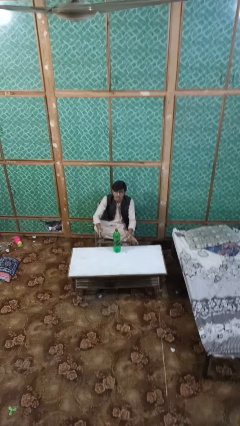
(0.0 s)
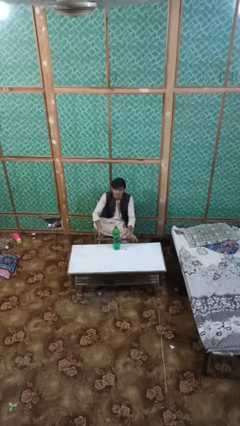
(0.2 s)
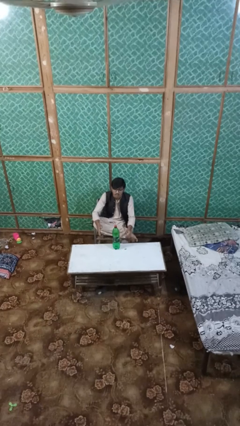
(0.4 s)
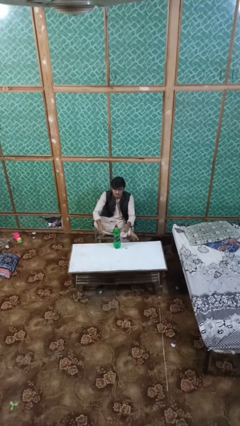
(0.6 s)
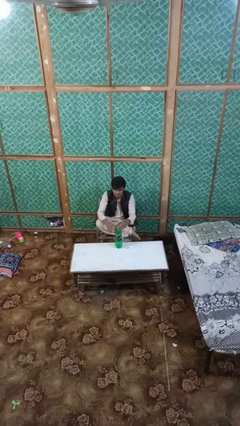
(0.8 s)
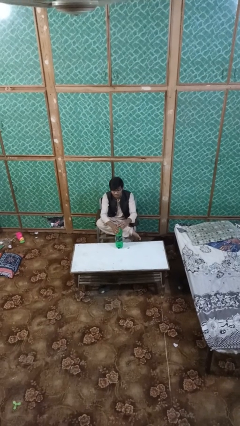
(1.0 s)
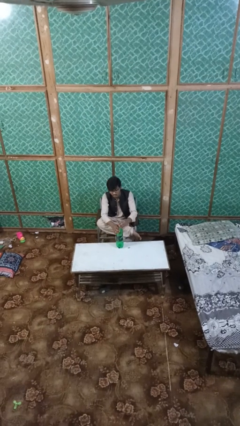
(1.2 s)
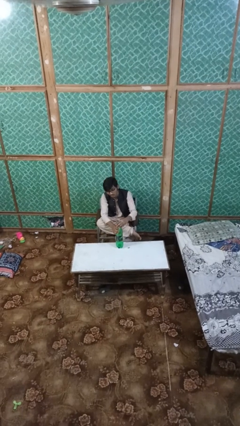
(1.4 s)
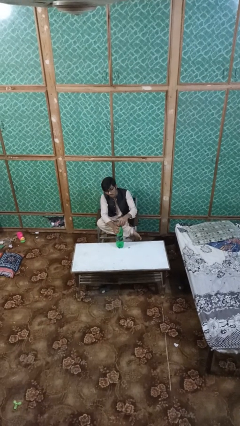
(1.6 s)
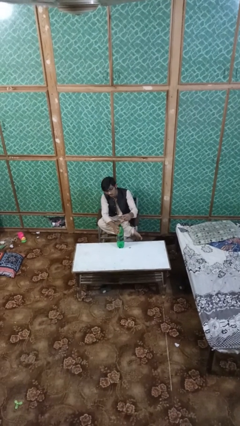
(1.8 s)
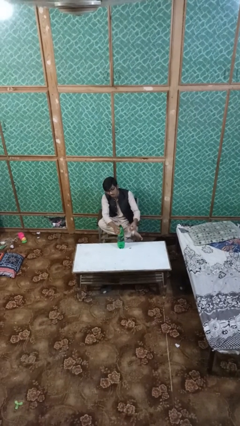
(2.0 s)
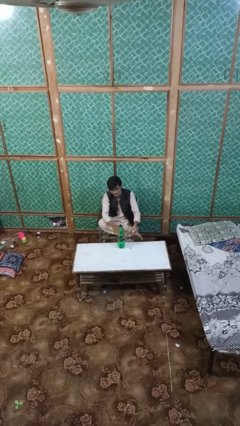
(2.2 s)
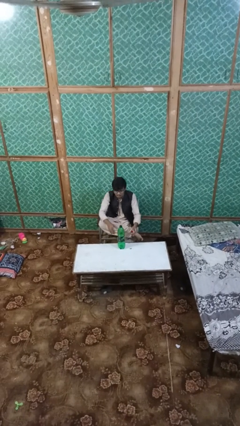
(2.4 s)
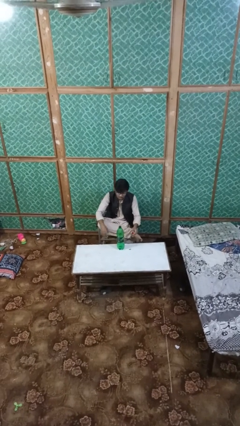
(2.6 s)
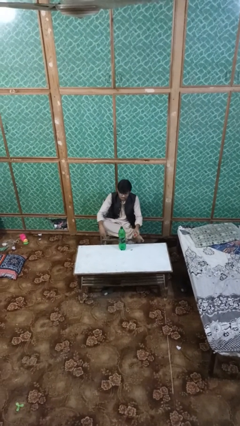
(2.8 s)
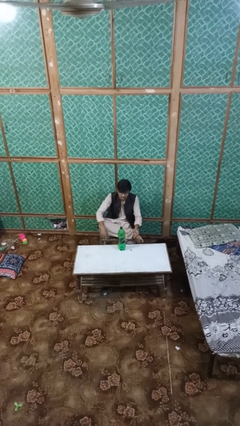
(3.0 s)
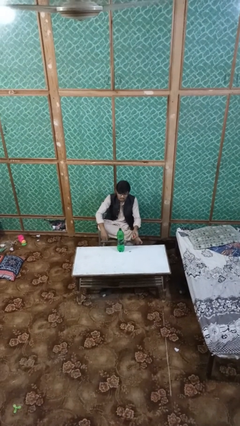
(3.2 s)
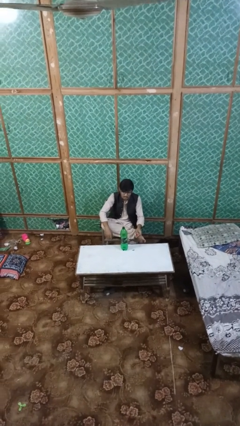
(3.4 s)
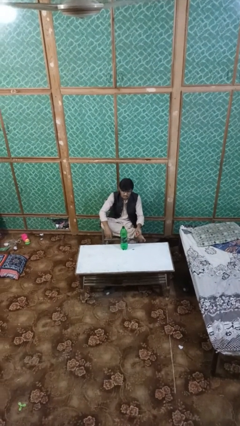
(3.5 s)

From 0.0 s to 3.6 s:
person unscrews lid from bottle

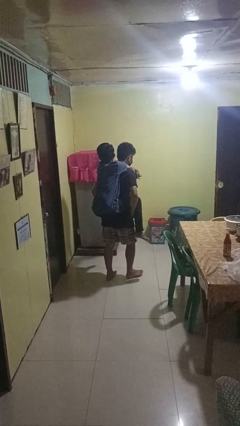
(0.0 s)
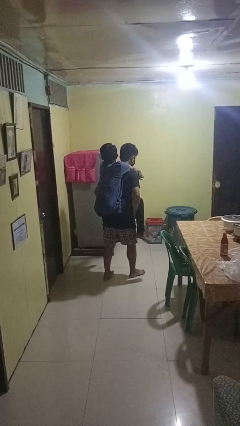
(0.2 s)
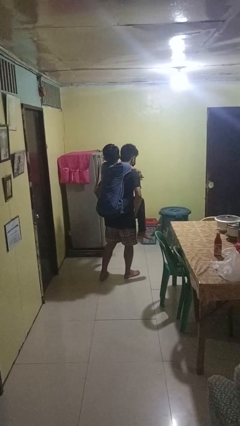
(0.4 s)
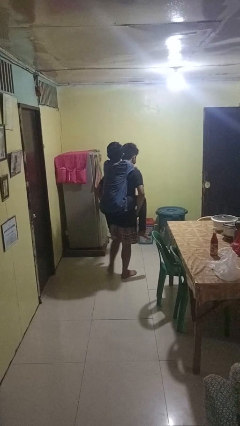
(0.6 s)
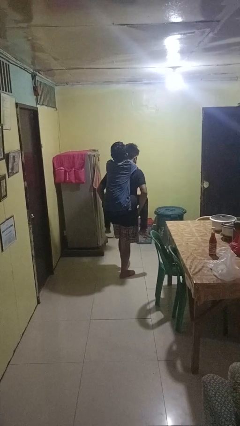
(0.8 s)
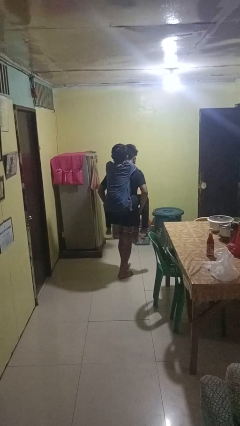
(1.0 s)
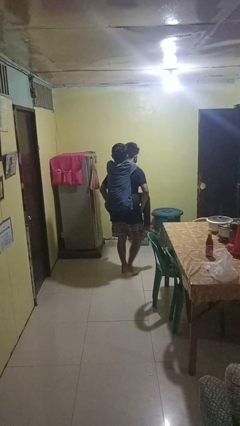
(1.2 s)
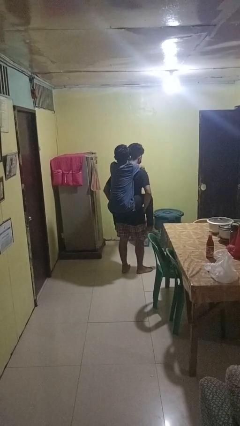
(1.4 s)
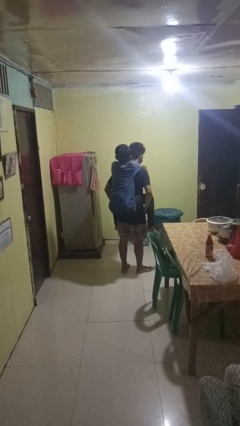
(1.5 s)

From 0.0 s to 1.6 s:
person carries person on back

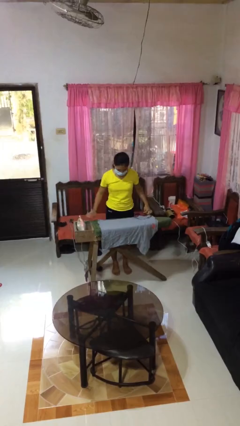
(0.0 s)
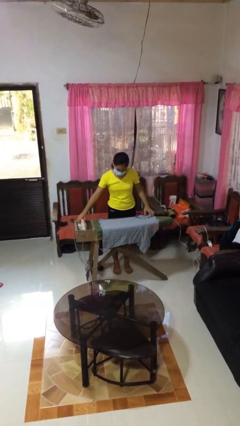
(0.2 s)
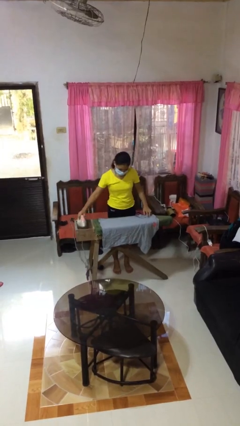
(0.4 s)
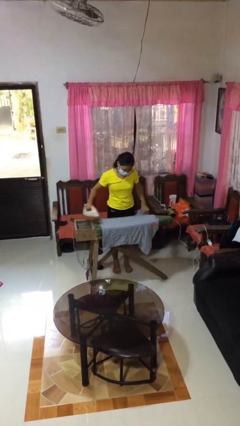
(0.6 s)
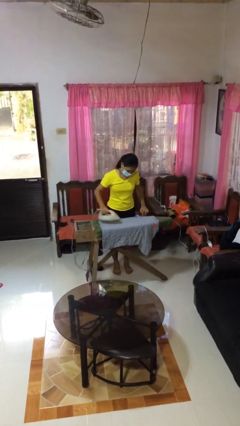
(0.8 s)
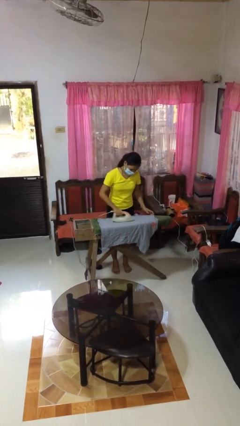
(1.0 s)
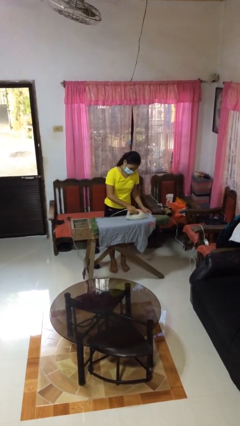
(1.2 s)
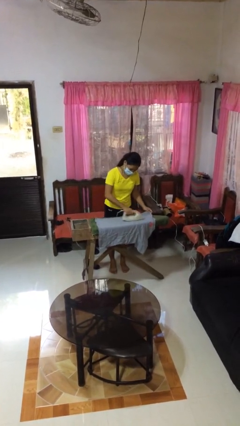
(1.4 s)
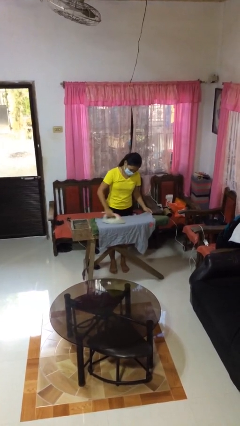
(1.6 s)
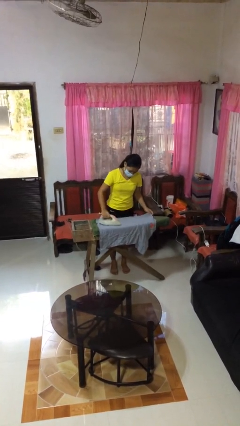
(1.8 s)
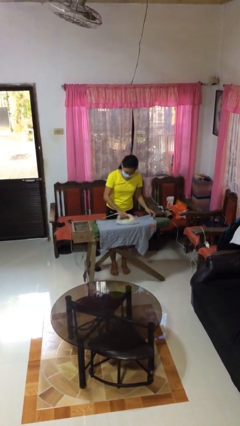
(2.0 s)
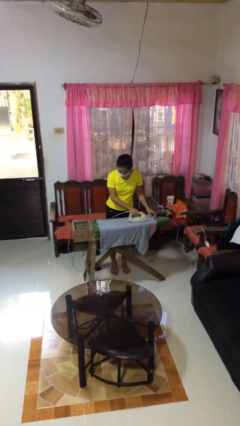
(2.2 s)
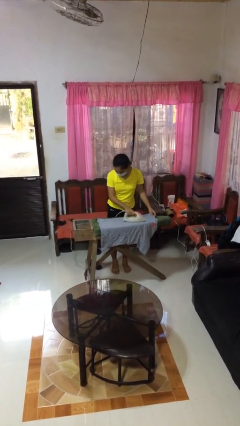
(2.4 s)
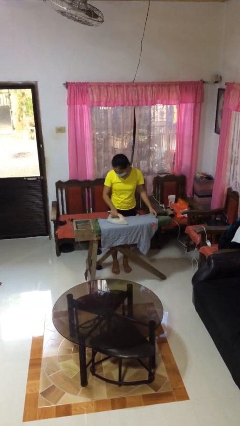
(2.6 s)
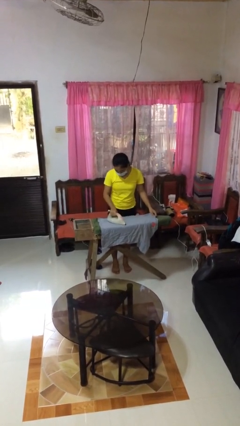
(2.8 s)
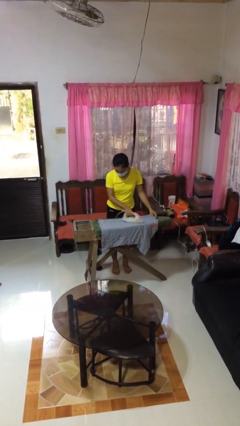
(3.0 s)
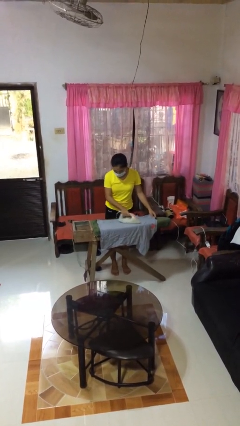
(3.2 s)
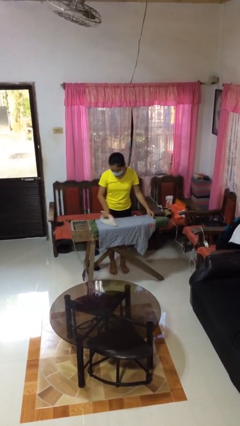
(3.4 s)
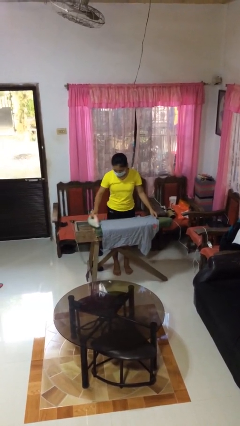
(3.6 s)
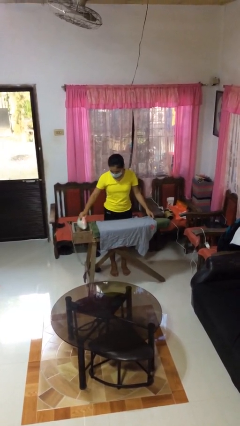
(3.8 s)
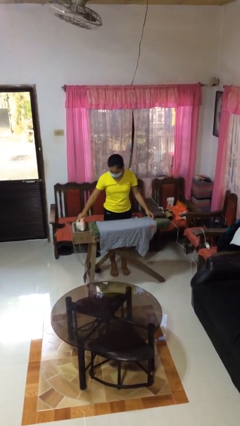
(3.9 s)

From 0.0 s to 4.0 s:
person irons clothes

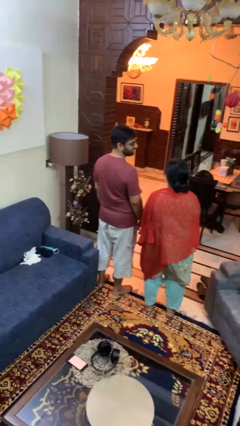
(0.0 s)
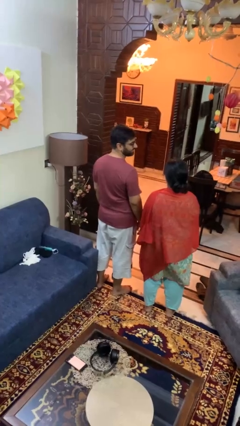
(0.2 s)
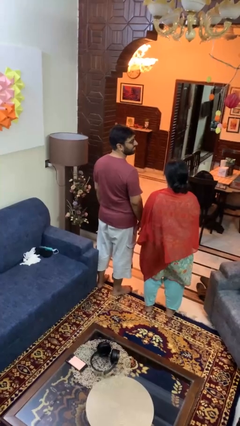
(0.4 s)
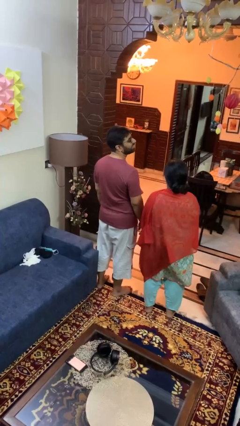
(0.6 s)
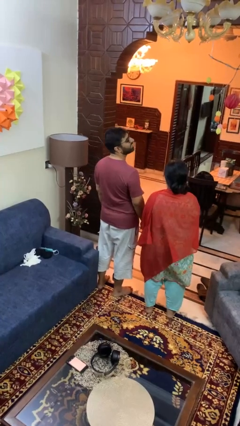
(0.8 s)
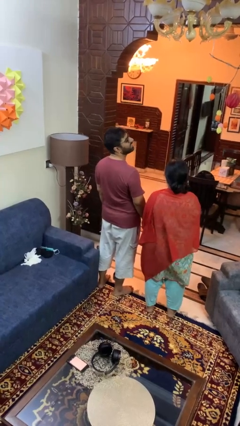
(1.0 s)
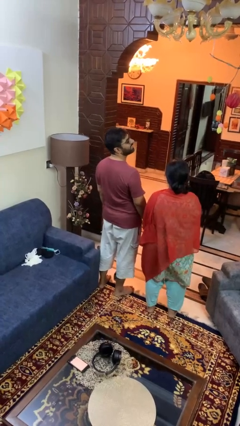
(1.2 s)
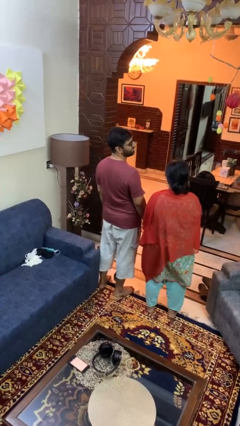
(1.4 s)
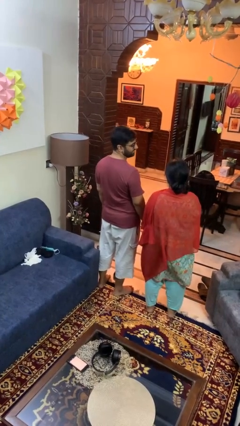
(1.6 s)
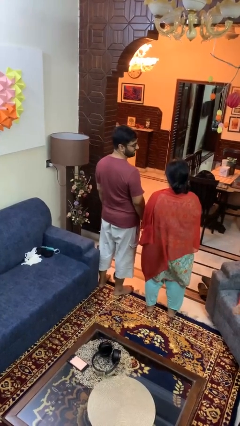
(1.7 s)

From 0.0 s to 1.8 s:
person laughs with person

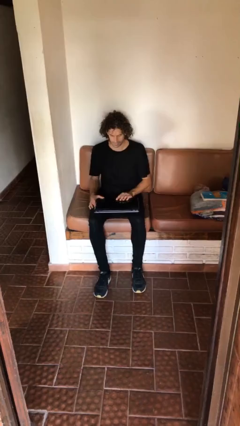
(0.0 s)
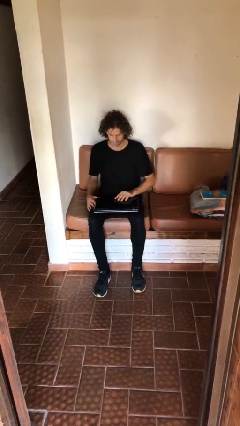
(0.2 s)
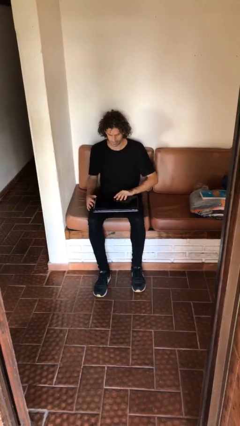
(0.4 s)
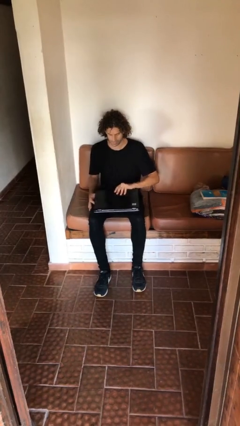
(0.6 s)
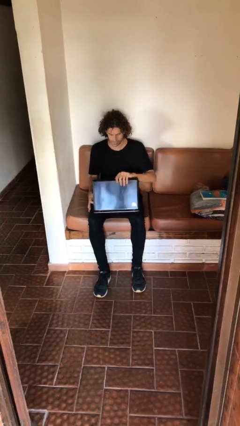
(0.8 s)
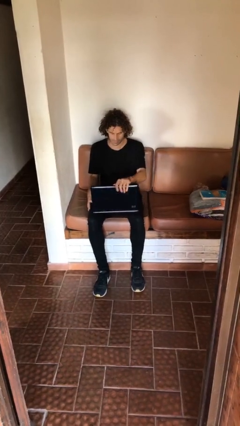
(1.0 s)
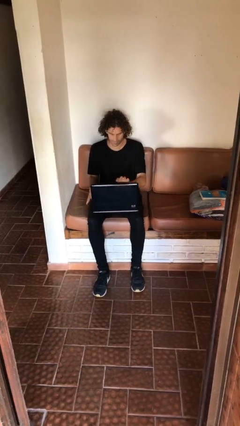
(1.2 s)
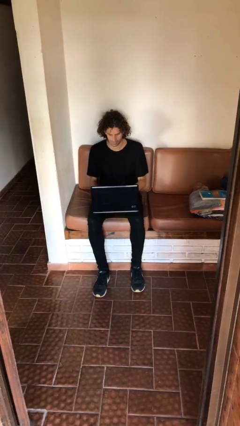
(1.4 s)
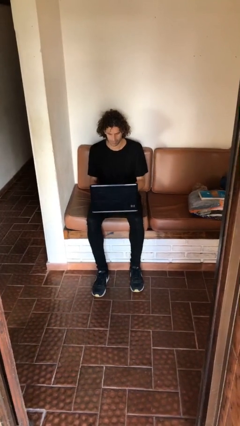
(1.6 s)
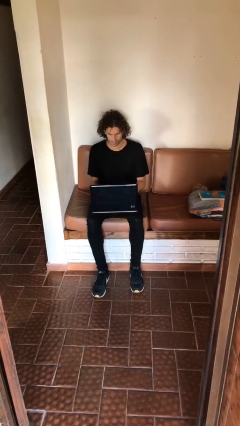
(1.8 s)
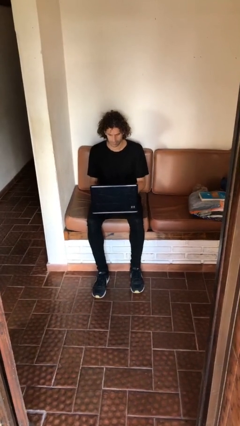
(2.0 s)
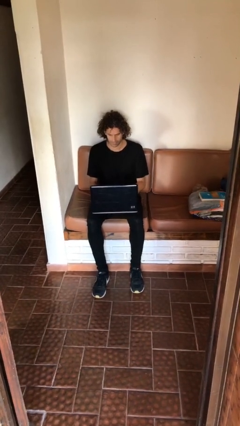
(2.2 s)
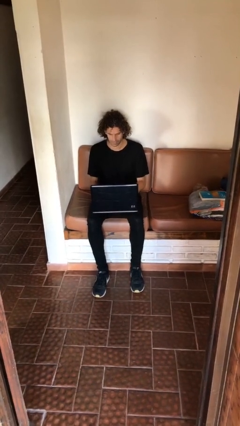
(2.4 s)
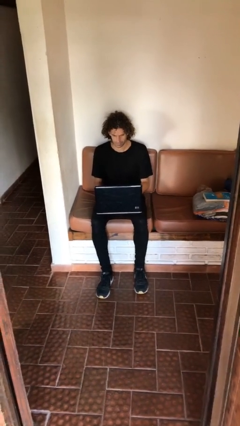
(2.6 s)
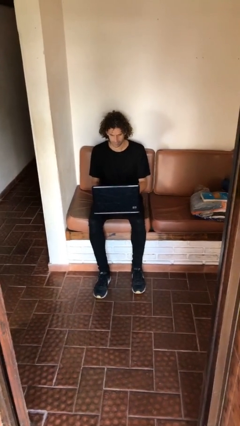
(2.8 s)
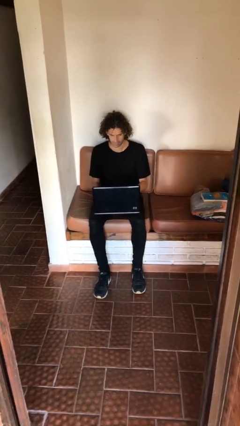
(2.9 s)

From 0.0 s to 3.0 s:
person interacts with laptop

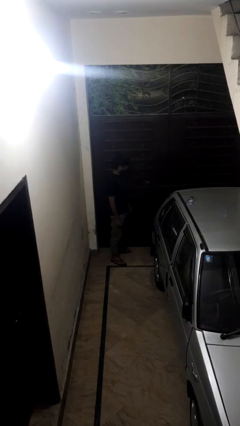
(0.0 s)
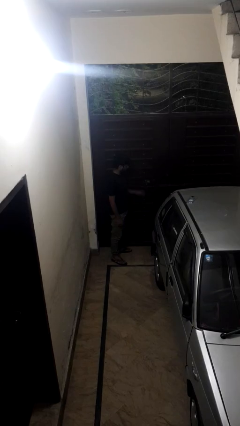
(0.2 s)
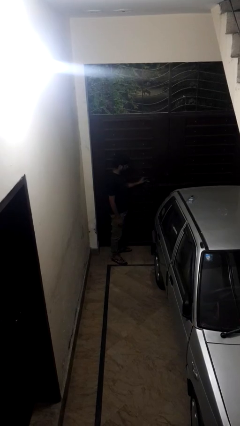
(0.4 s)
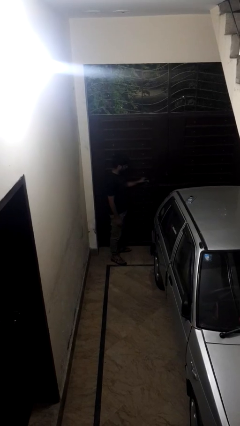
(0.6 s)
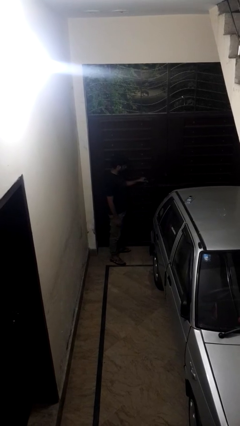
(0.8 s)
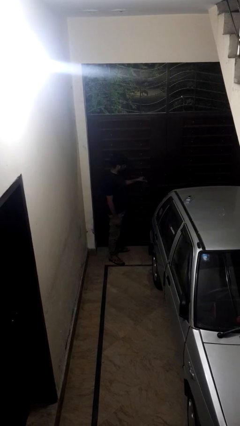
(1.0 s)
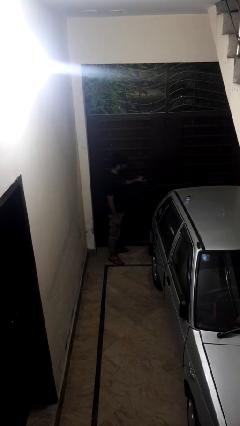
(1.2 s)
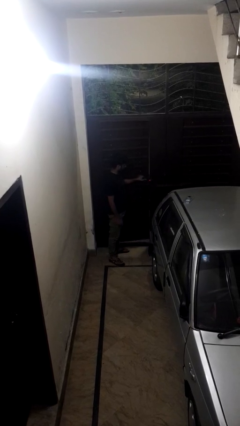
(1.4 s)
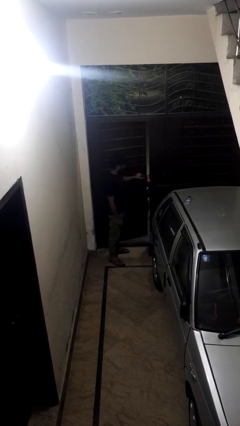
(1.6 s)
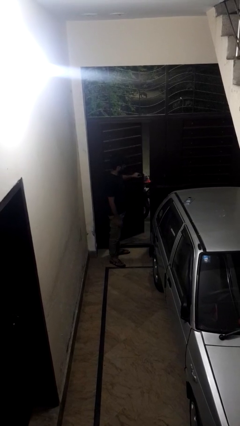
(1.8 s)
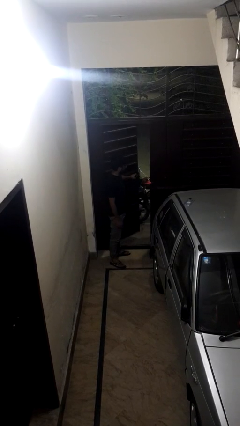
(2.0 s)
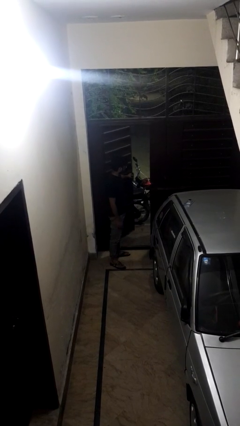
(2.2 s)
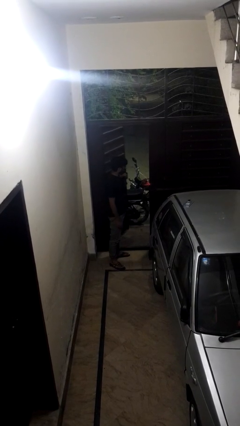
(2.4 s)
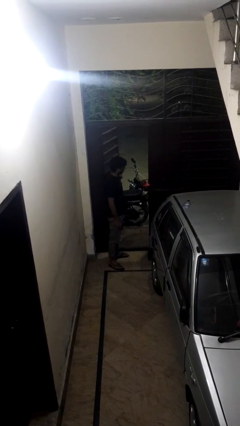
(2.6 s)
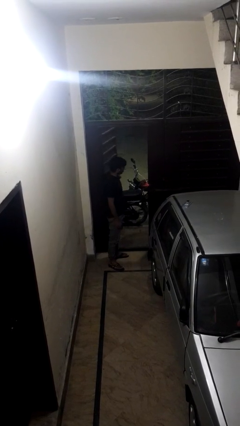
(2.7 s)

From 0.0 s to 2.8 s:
person opens gate

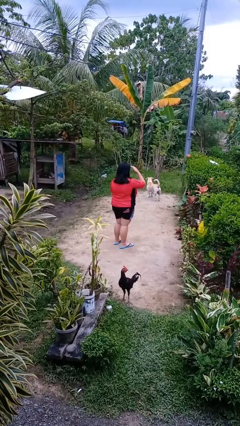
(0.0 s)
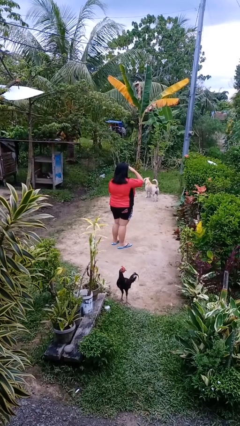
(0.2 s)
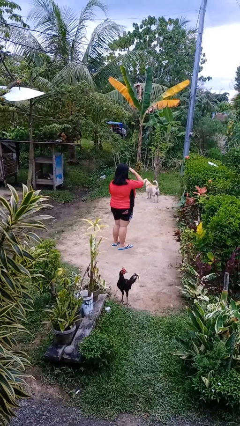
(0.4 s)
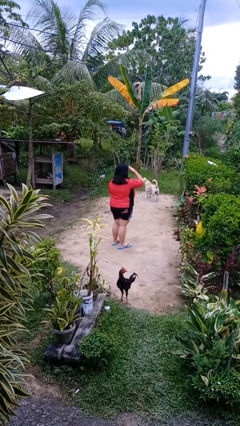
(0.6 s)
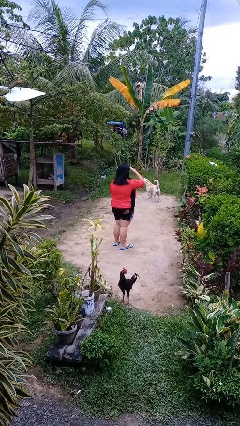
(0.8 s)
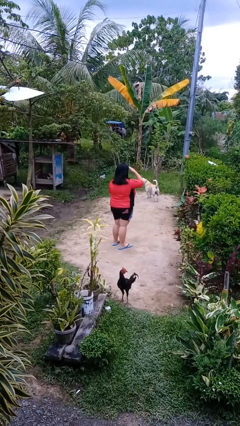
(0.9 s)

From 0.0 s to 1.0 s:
person shades eyes
